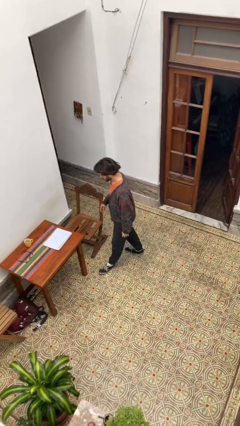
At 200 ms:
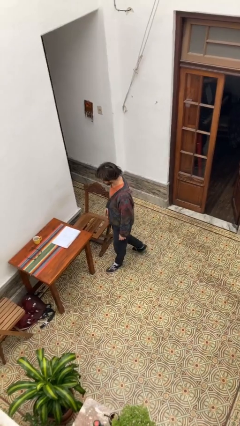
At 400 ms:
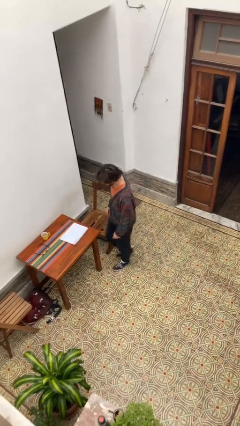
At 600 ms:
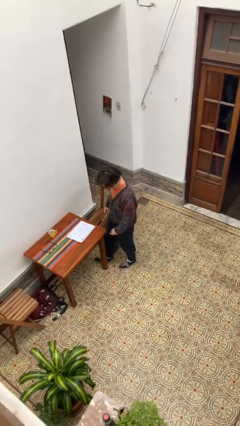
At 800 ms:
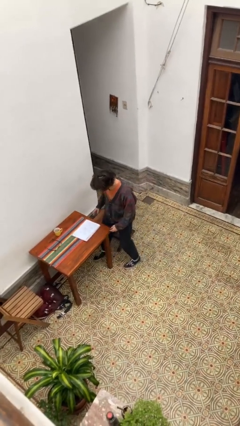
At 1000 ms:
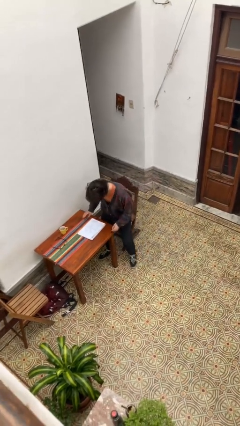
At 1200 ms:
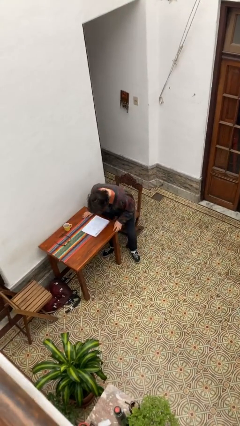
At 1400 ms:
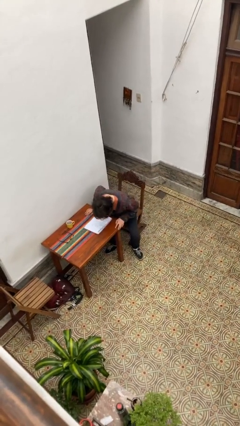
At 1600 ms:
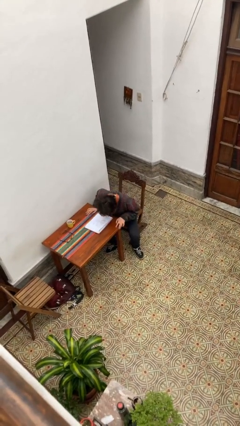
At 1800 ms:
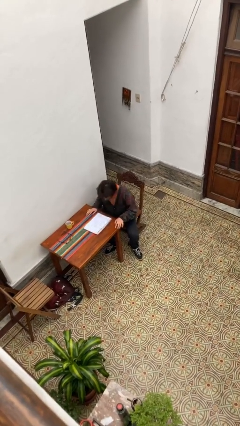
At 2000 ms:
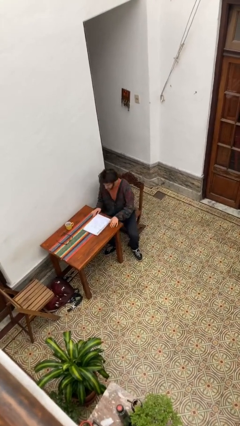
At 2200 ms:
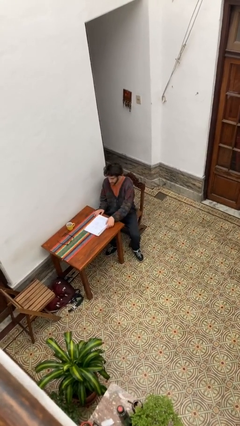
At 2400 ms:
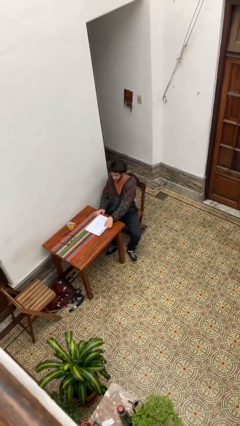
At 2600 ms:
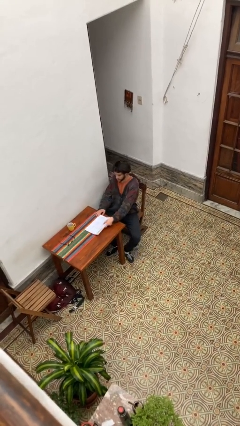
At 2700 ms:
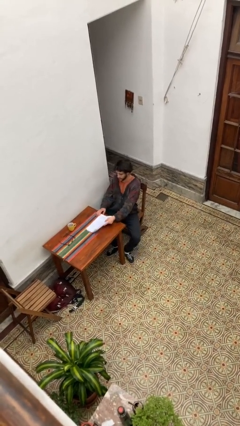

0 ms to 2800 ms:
person sits down

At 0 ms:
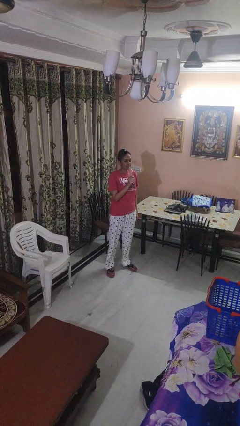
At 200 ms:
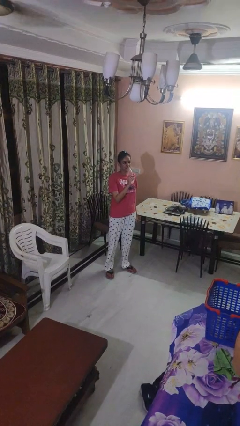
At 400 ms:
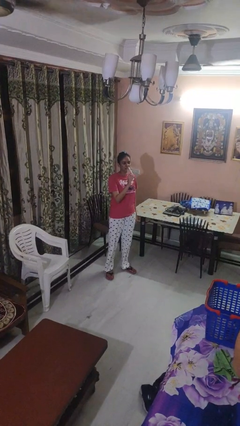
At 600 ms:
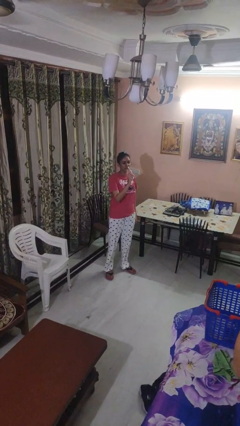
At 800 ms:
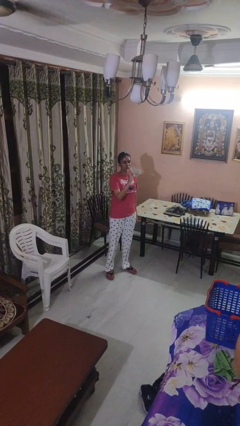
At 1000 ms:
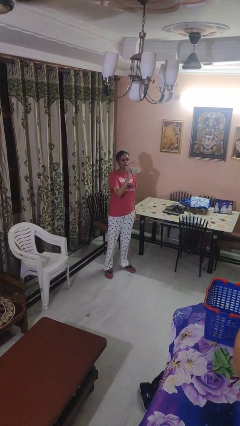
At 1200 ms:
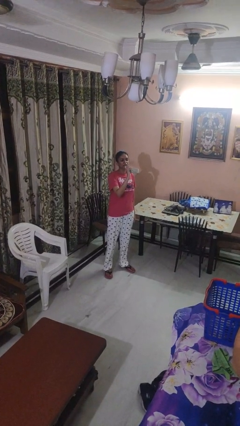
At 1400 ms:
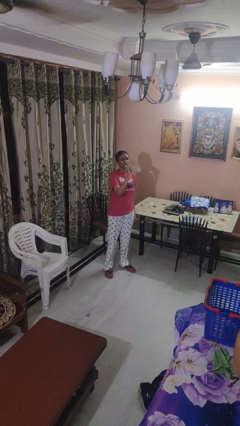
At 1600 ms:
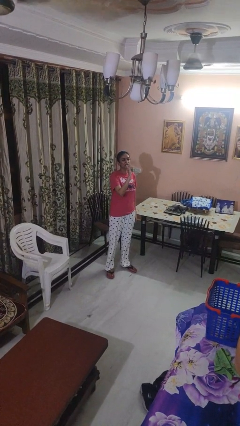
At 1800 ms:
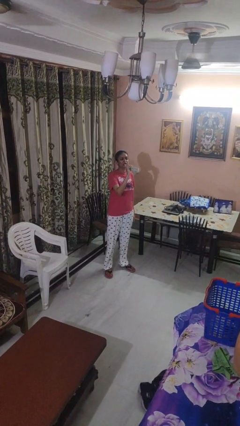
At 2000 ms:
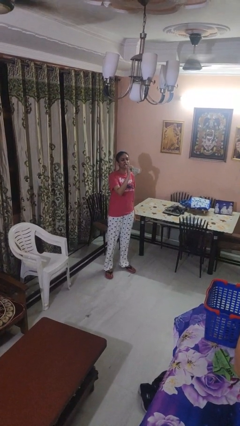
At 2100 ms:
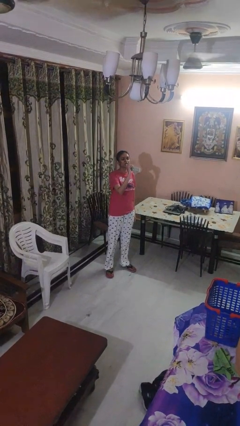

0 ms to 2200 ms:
person drinks from bottle

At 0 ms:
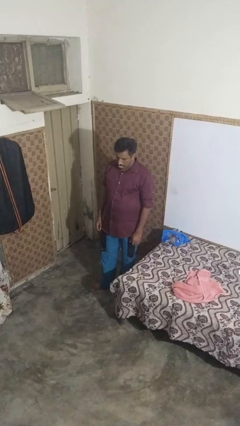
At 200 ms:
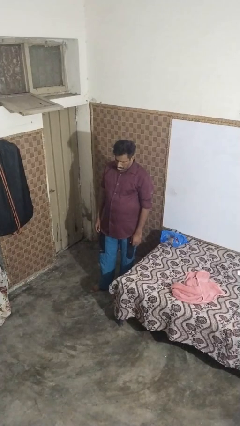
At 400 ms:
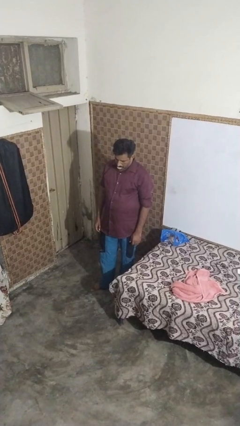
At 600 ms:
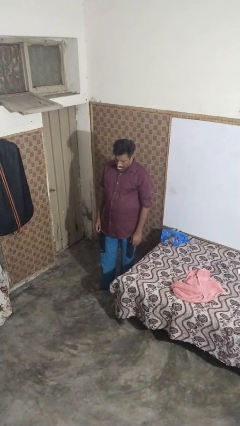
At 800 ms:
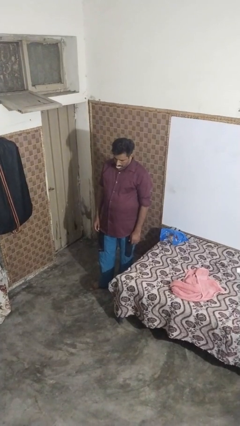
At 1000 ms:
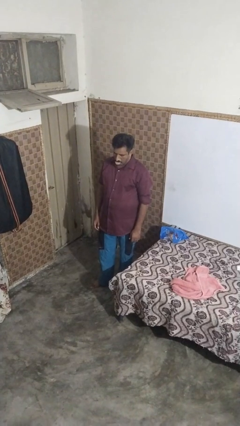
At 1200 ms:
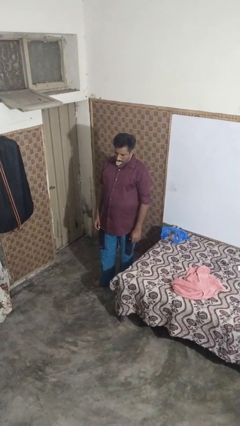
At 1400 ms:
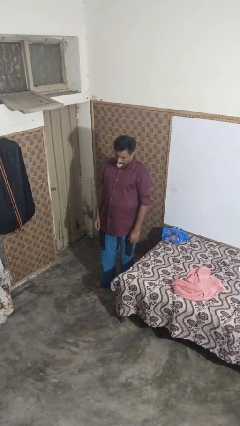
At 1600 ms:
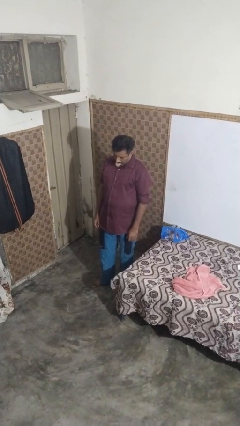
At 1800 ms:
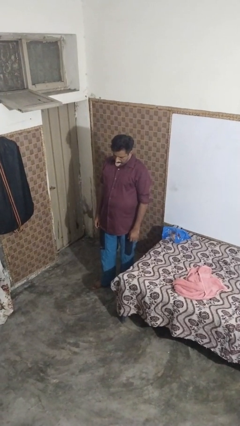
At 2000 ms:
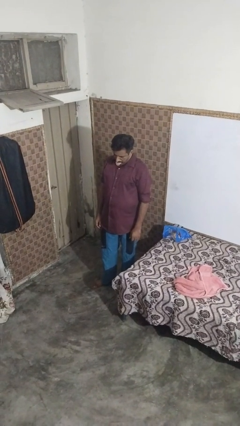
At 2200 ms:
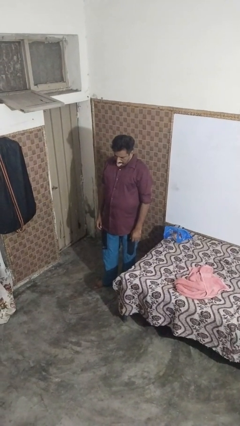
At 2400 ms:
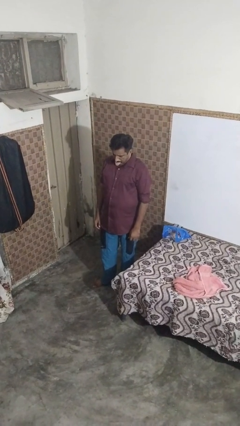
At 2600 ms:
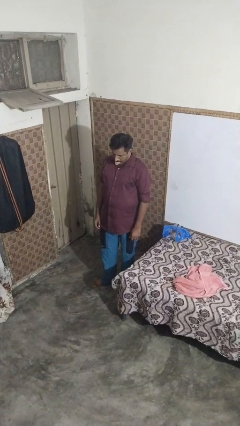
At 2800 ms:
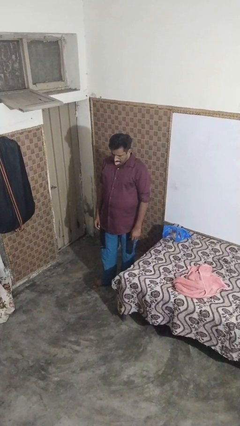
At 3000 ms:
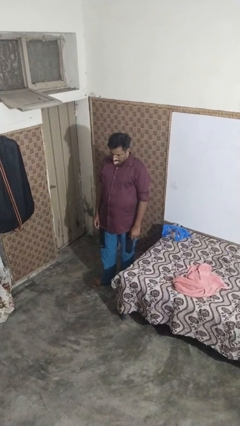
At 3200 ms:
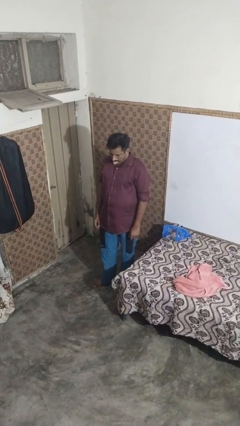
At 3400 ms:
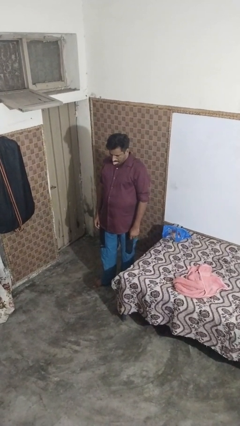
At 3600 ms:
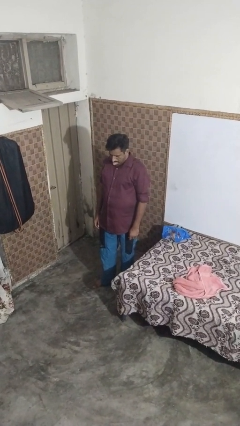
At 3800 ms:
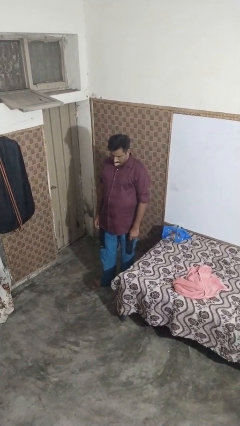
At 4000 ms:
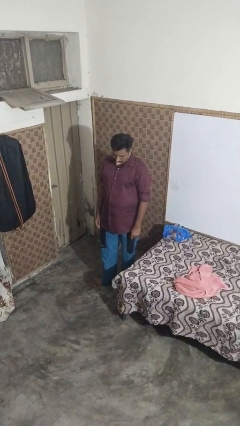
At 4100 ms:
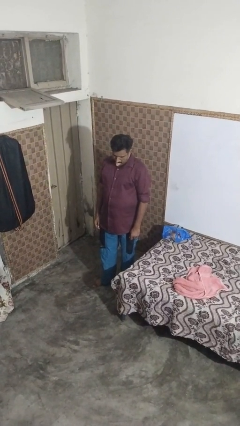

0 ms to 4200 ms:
person sticks out tongue

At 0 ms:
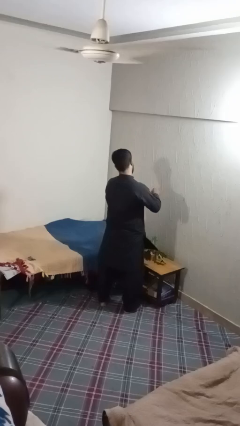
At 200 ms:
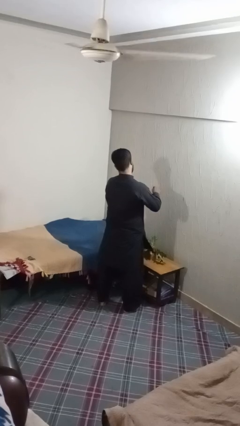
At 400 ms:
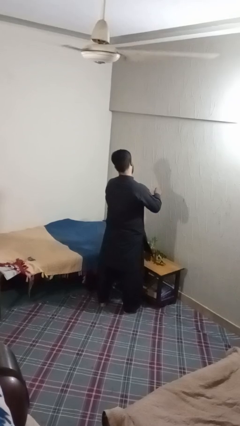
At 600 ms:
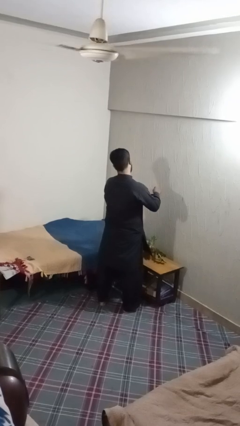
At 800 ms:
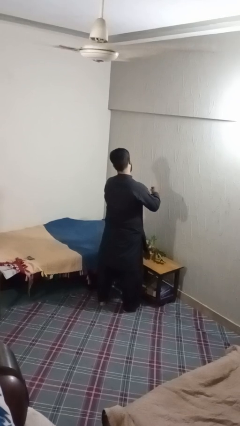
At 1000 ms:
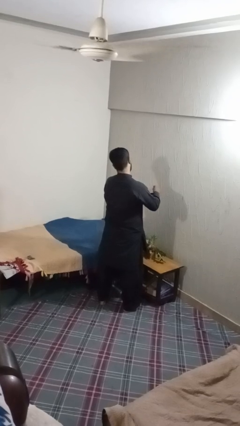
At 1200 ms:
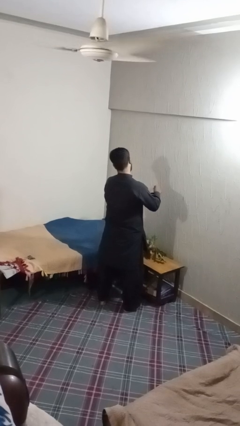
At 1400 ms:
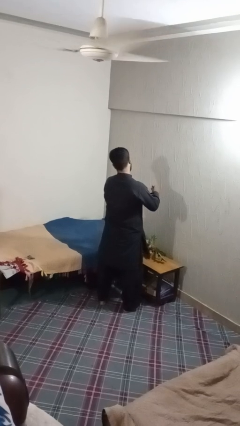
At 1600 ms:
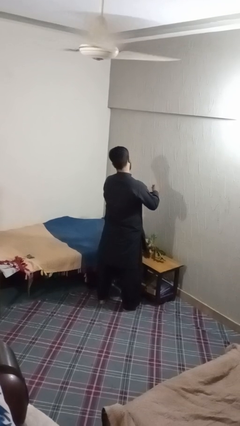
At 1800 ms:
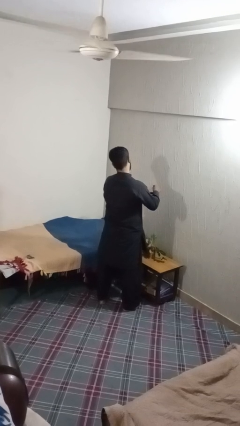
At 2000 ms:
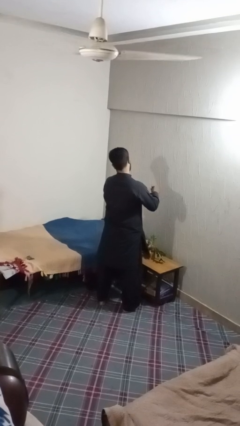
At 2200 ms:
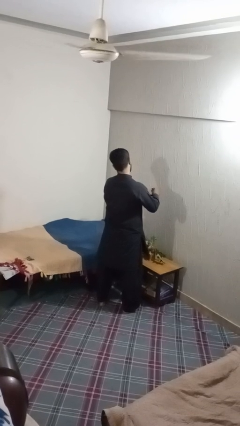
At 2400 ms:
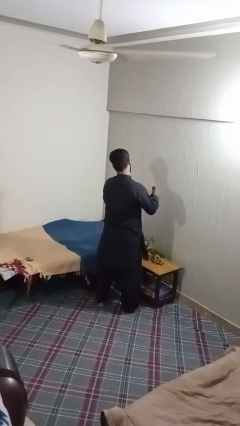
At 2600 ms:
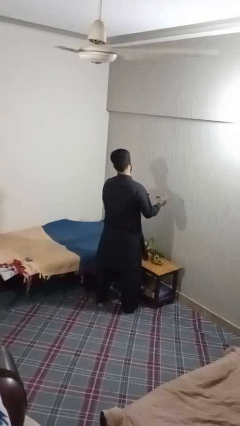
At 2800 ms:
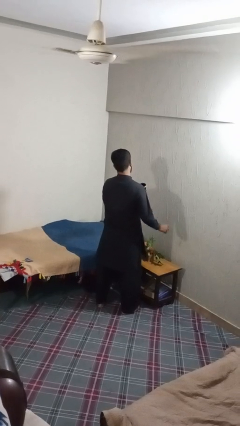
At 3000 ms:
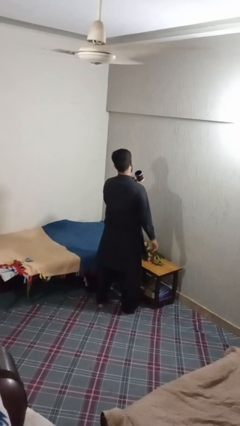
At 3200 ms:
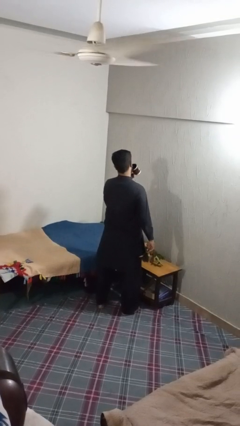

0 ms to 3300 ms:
person stirs mug

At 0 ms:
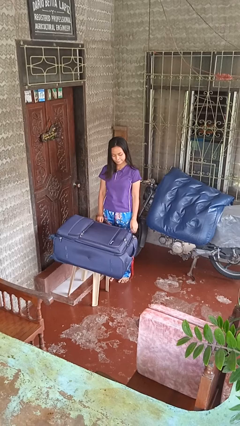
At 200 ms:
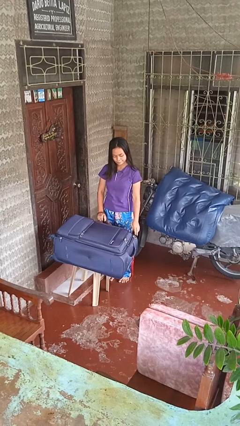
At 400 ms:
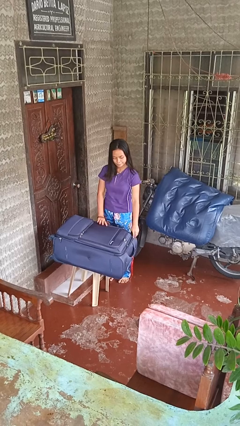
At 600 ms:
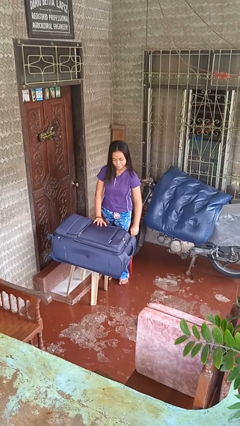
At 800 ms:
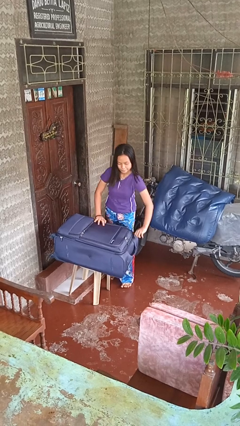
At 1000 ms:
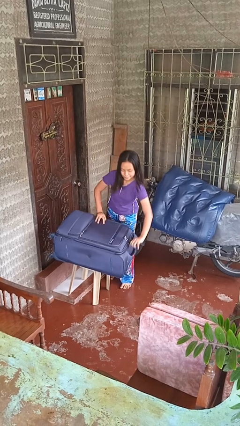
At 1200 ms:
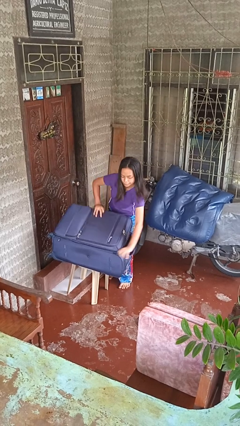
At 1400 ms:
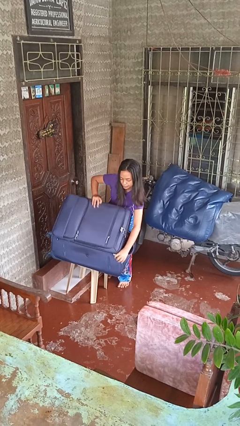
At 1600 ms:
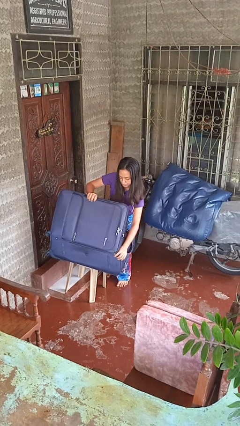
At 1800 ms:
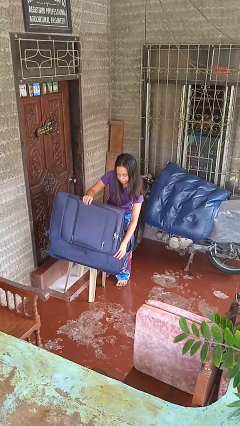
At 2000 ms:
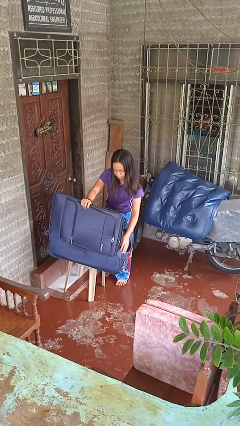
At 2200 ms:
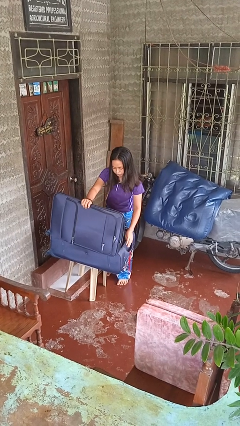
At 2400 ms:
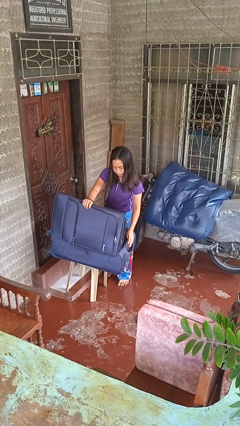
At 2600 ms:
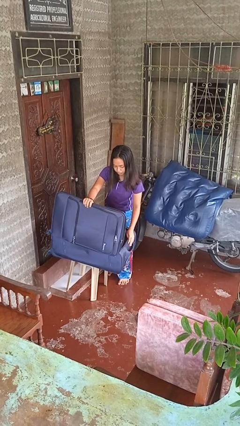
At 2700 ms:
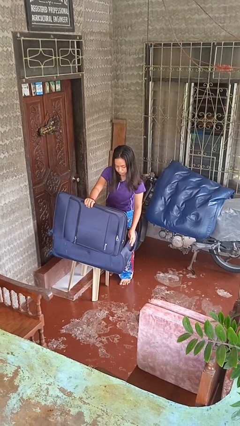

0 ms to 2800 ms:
person opens suitcase

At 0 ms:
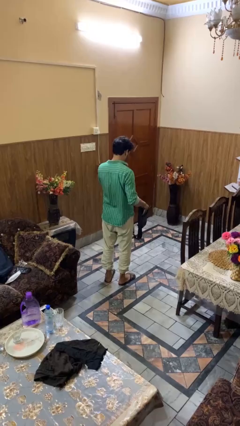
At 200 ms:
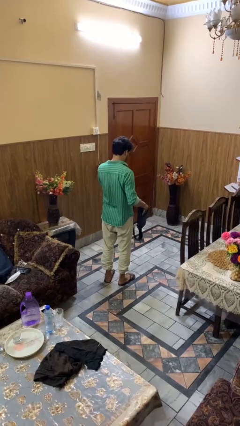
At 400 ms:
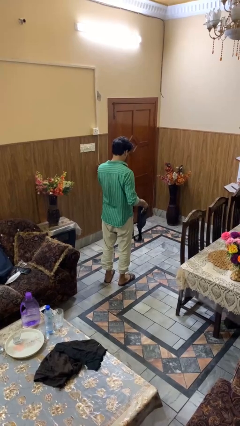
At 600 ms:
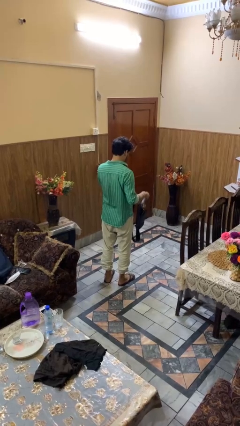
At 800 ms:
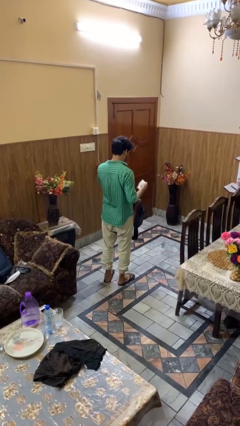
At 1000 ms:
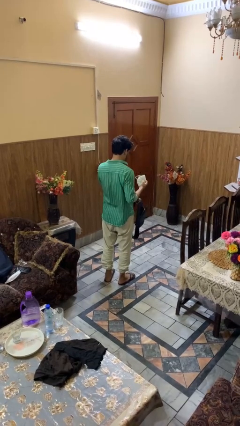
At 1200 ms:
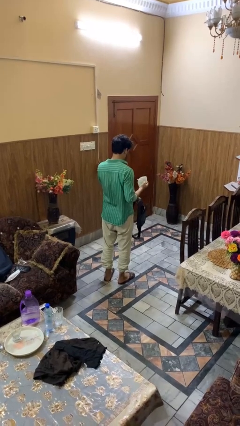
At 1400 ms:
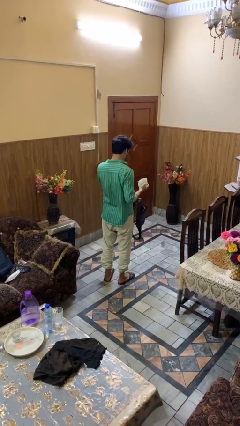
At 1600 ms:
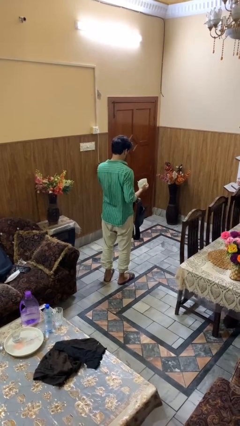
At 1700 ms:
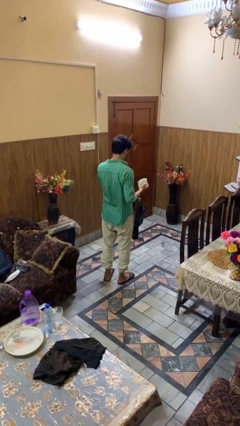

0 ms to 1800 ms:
person takes object from purse

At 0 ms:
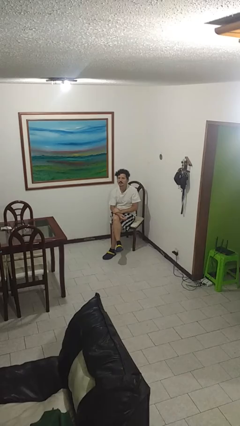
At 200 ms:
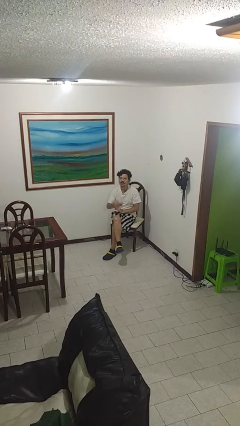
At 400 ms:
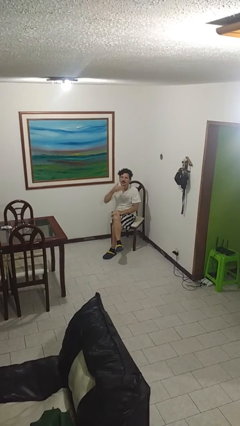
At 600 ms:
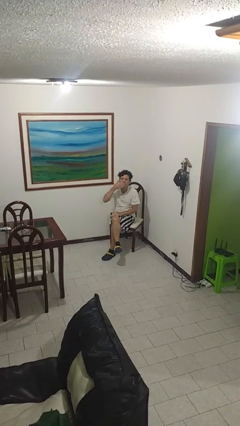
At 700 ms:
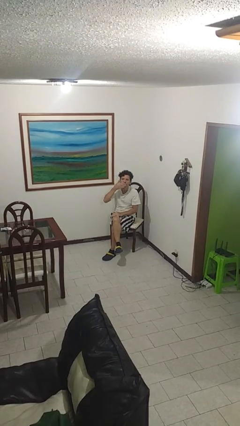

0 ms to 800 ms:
person gestures blow kiss
